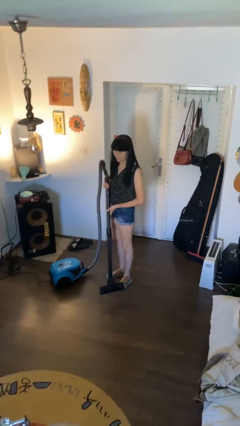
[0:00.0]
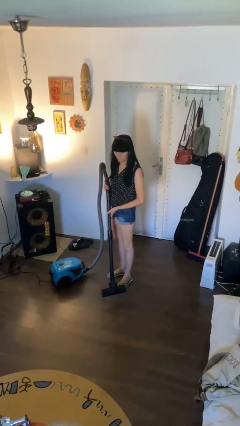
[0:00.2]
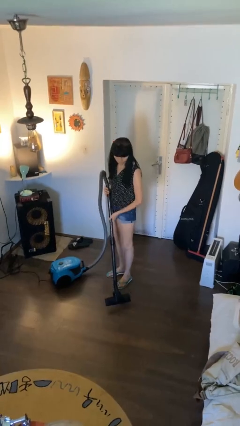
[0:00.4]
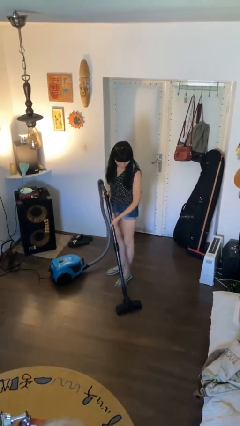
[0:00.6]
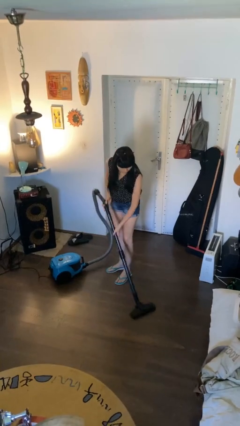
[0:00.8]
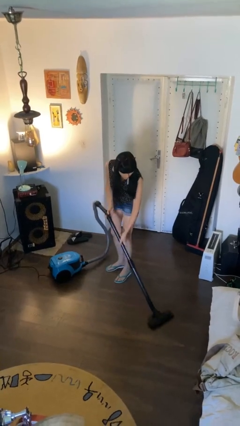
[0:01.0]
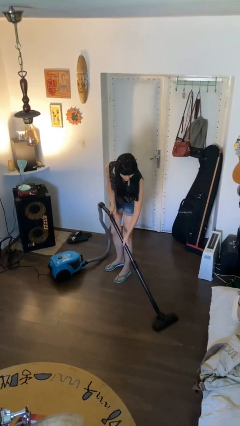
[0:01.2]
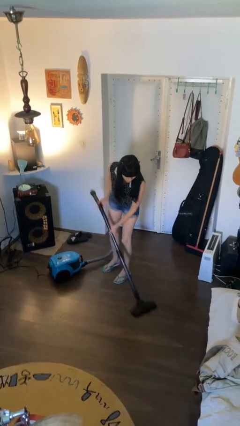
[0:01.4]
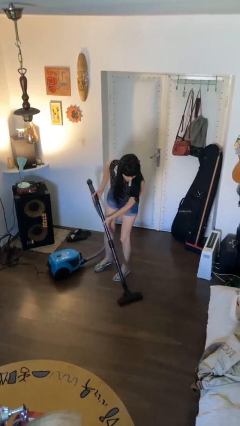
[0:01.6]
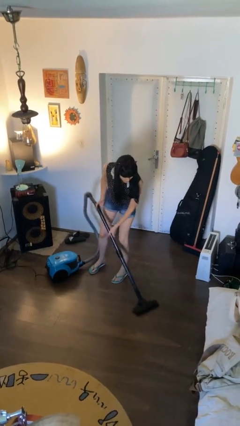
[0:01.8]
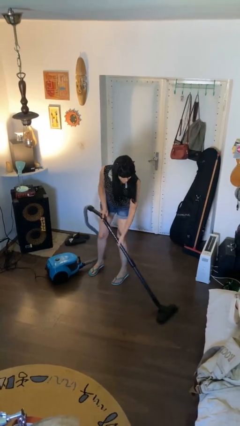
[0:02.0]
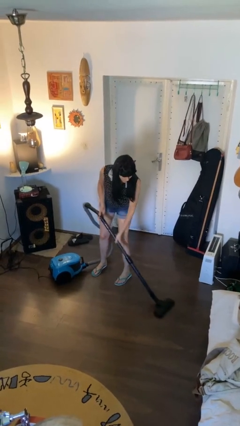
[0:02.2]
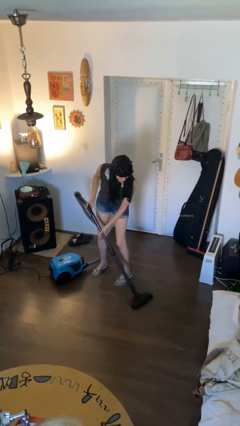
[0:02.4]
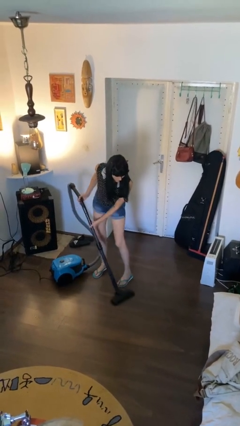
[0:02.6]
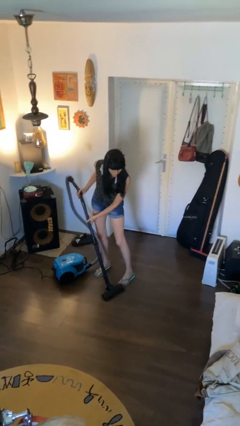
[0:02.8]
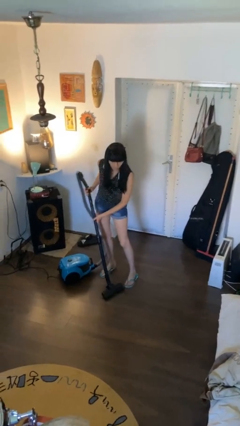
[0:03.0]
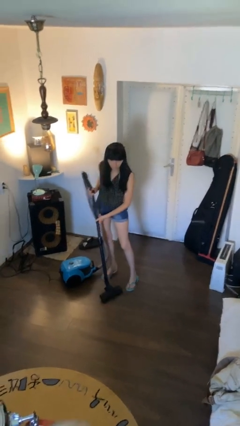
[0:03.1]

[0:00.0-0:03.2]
person vacuums carpet

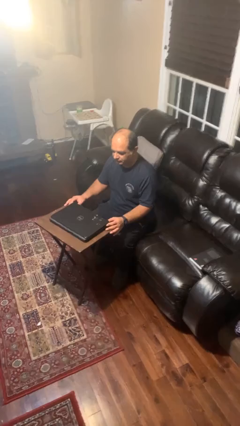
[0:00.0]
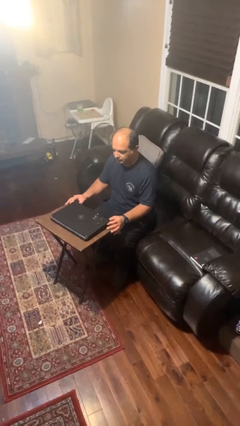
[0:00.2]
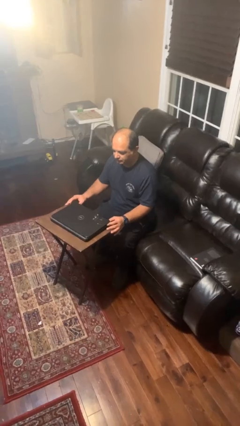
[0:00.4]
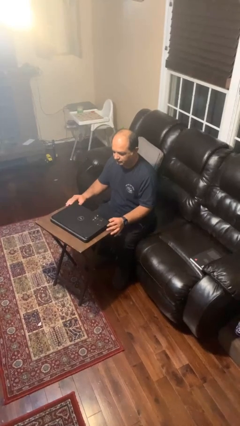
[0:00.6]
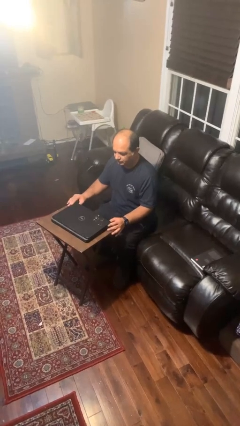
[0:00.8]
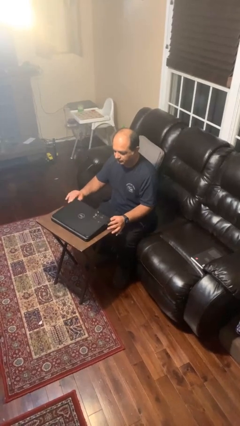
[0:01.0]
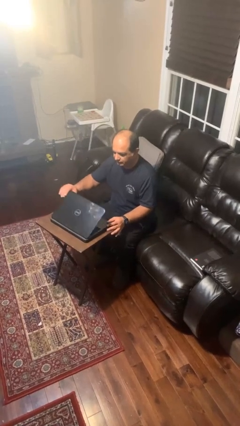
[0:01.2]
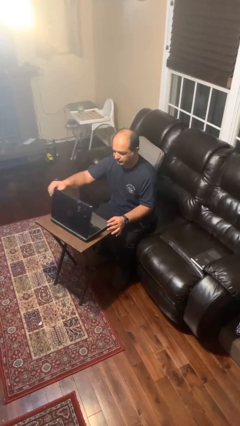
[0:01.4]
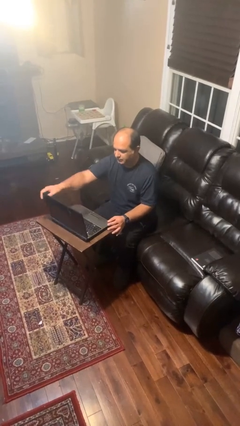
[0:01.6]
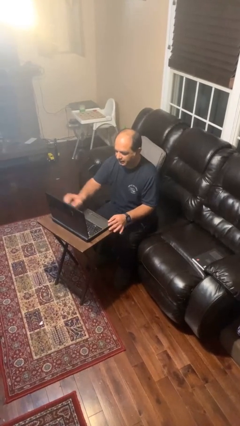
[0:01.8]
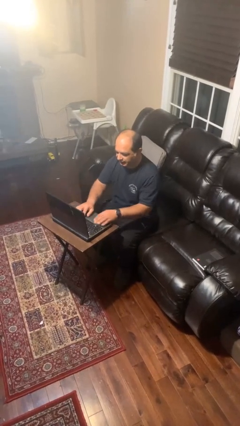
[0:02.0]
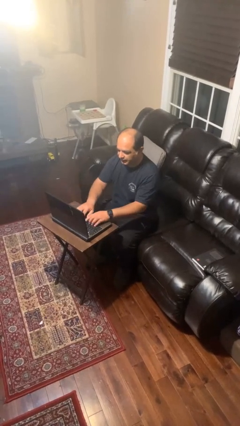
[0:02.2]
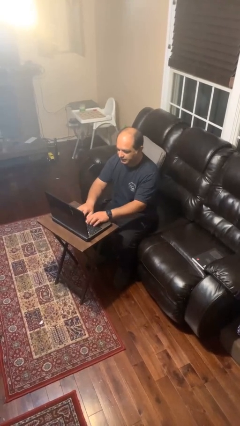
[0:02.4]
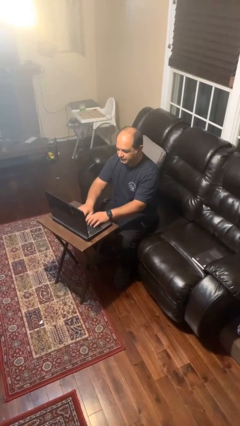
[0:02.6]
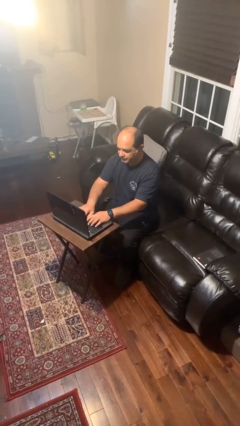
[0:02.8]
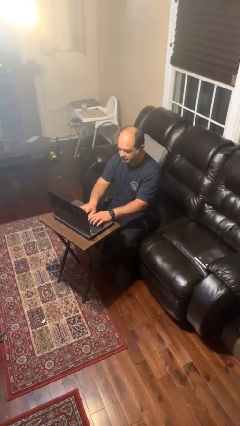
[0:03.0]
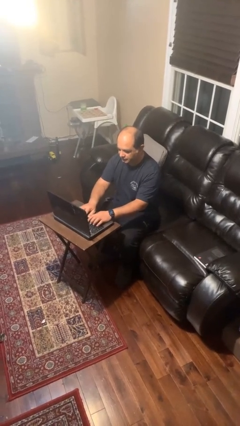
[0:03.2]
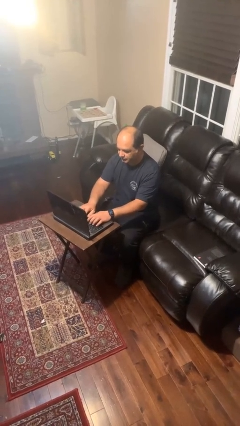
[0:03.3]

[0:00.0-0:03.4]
person interacts with laptop

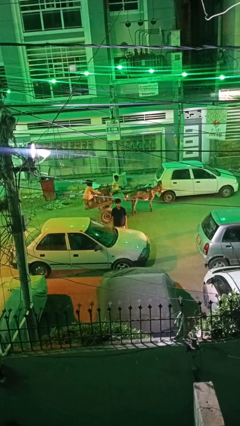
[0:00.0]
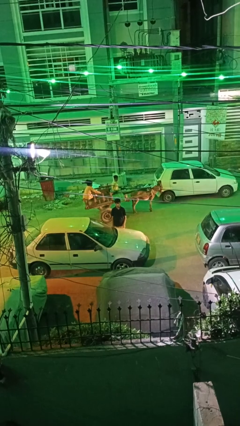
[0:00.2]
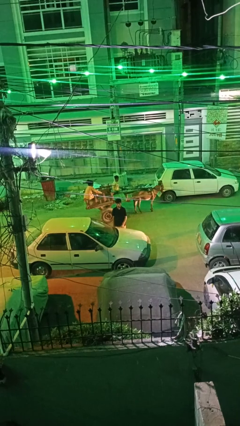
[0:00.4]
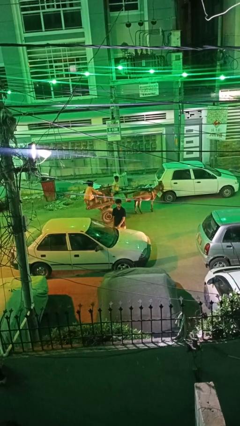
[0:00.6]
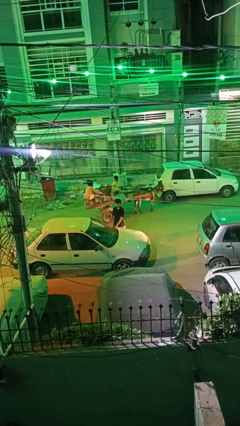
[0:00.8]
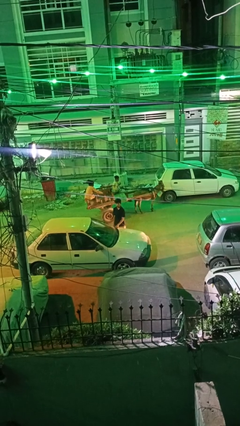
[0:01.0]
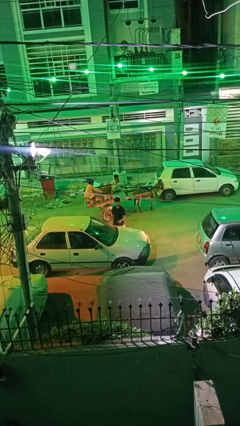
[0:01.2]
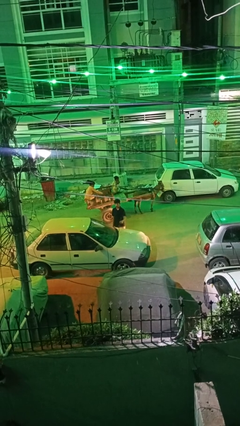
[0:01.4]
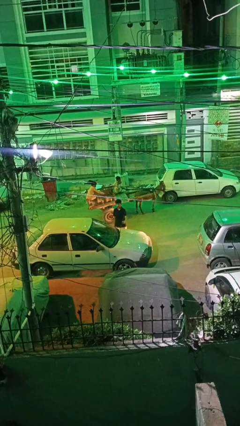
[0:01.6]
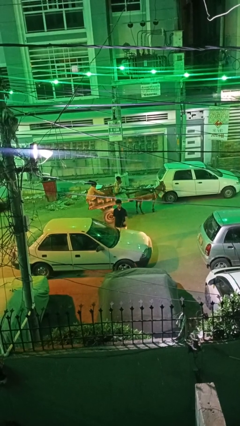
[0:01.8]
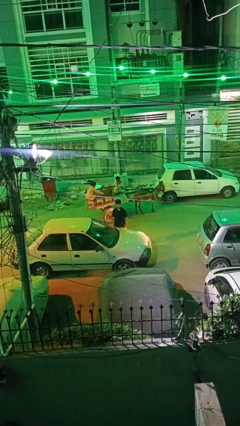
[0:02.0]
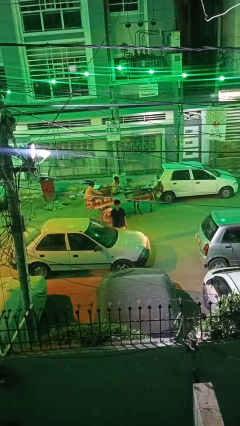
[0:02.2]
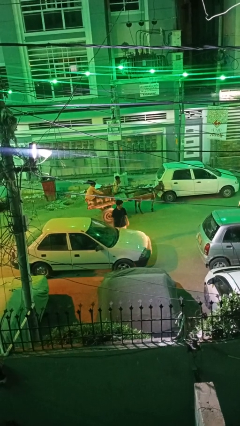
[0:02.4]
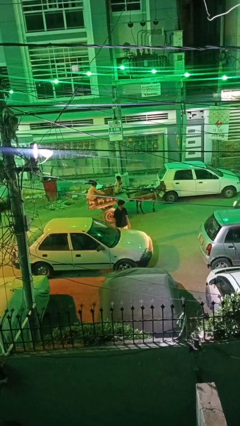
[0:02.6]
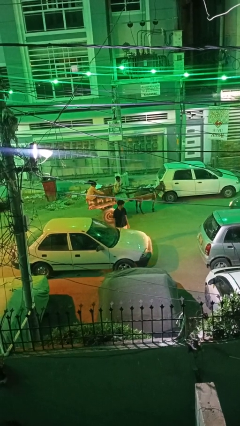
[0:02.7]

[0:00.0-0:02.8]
person flips up car wipers

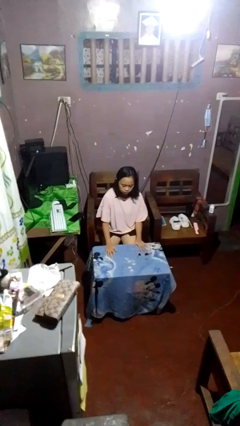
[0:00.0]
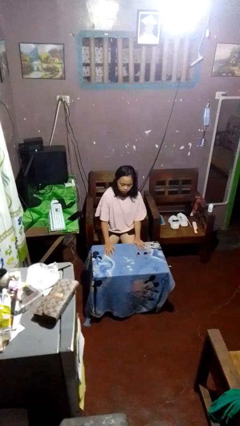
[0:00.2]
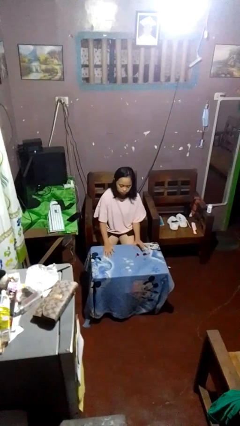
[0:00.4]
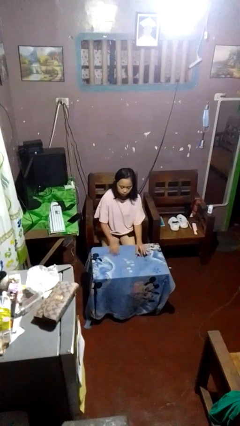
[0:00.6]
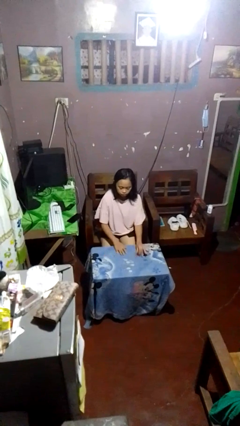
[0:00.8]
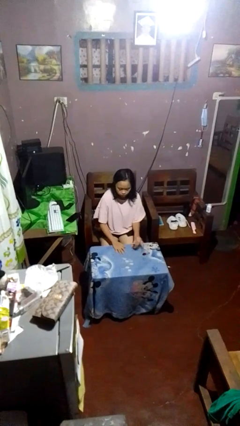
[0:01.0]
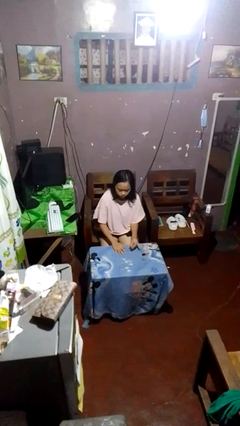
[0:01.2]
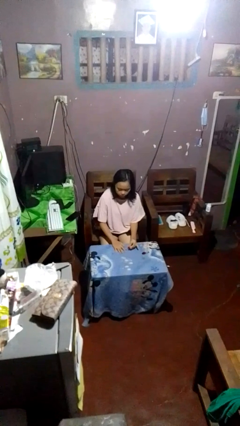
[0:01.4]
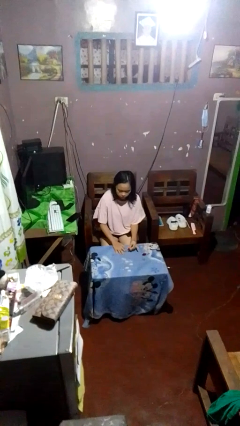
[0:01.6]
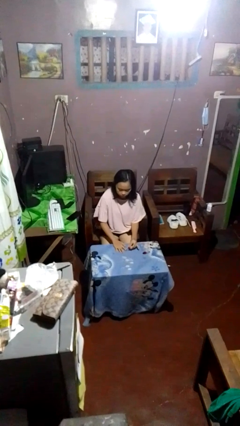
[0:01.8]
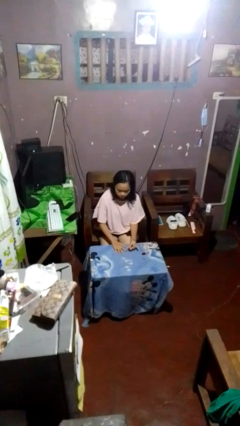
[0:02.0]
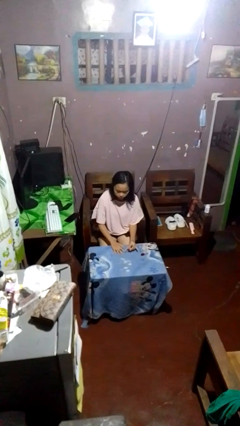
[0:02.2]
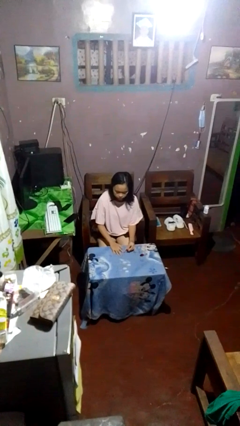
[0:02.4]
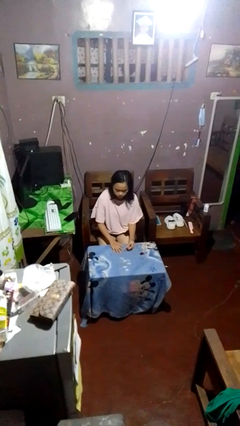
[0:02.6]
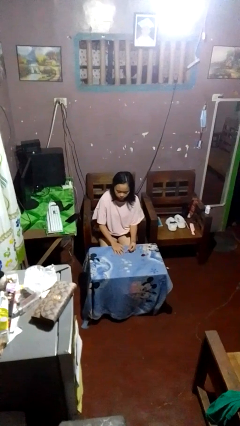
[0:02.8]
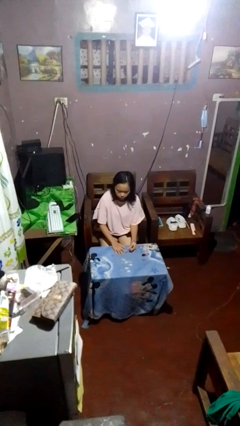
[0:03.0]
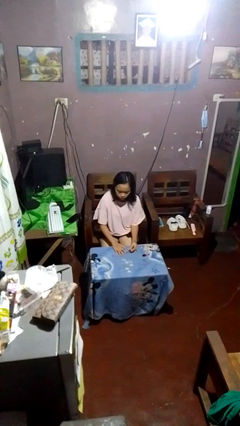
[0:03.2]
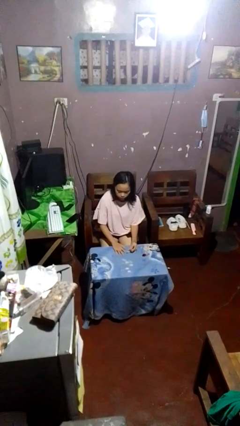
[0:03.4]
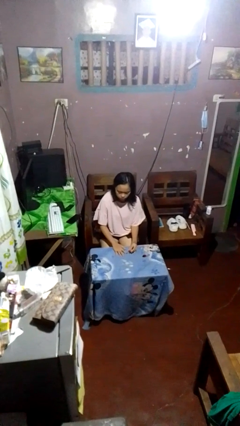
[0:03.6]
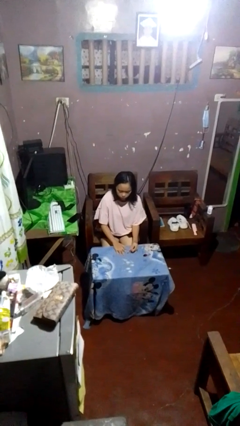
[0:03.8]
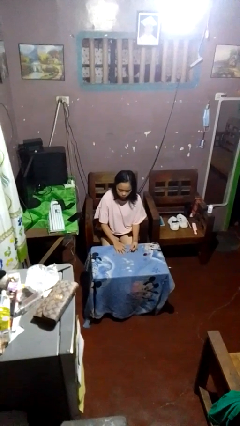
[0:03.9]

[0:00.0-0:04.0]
person paints fingernails

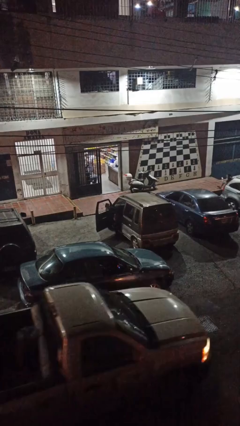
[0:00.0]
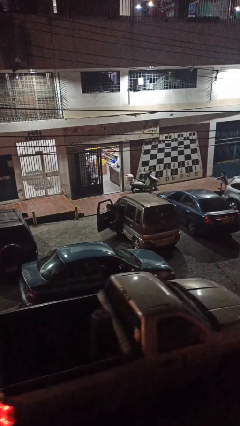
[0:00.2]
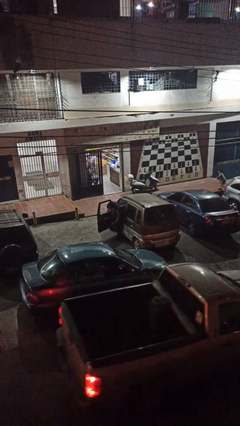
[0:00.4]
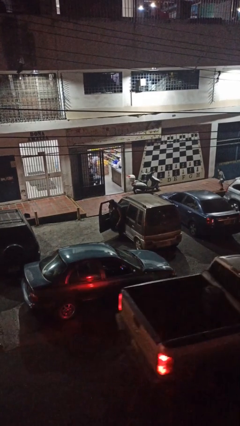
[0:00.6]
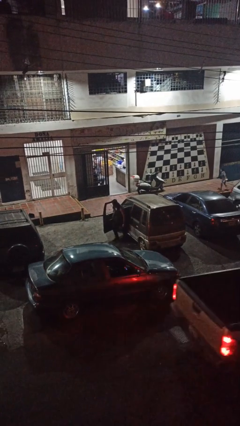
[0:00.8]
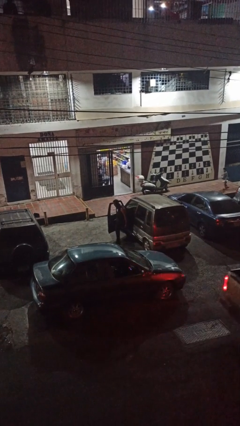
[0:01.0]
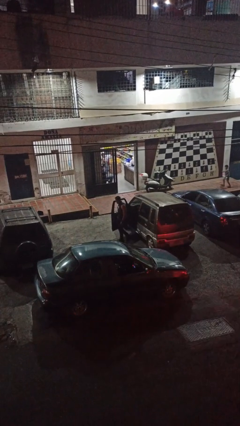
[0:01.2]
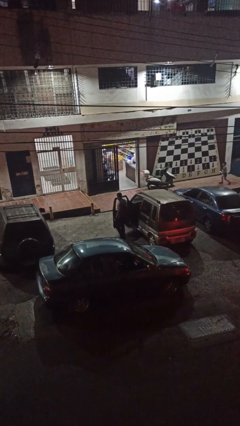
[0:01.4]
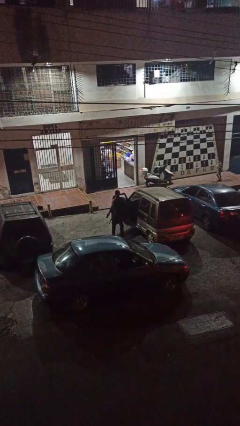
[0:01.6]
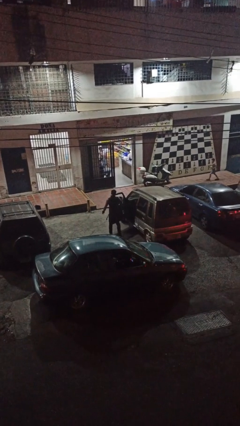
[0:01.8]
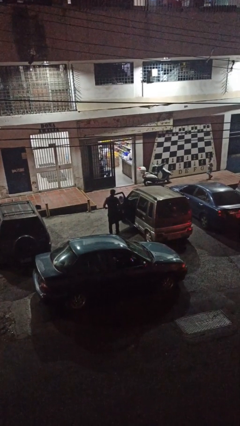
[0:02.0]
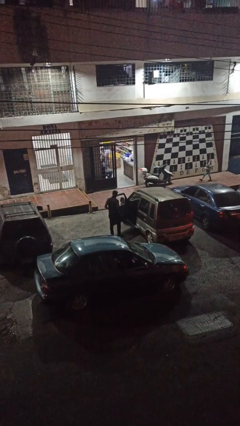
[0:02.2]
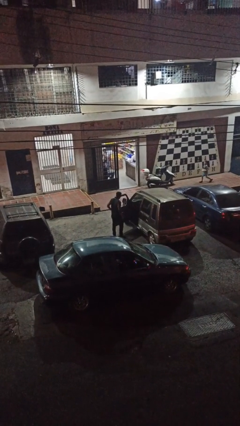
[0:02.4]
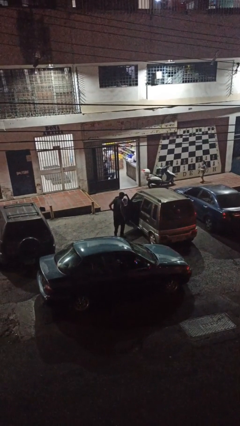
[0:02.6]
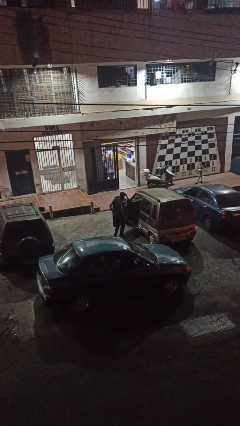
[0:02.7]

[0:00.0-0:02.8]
person exits car

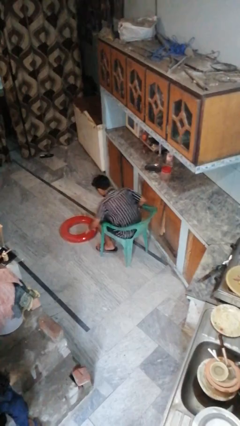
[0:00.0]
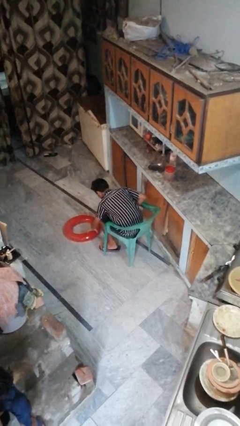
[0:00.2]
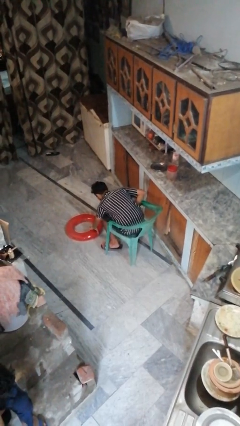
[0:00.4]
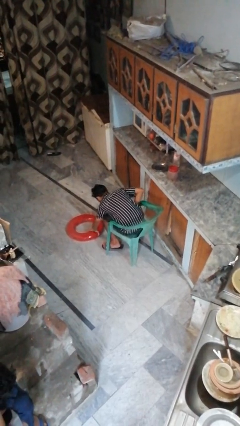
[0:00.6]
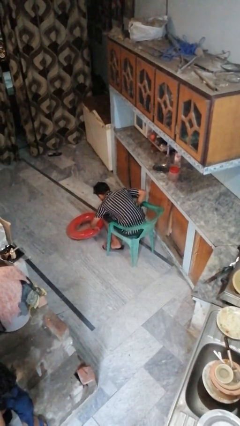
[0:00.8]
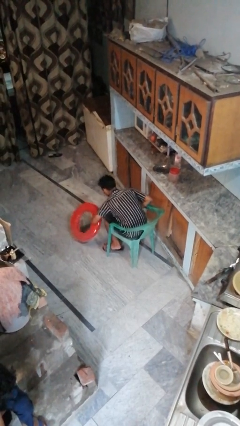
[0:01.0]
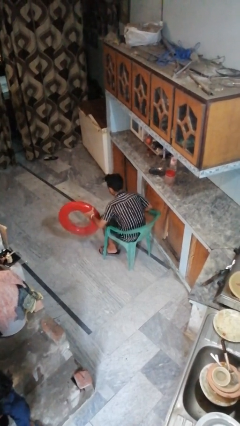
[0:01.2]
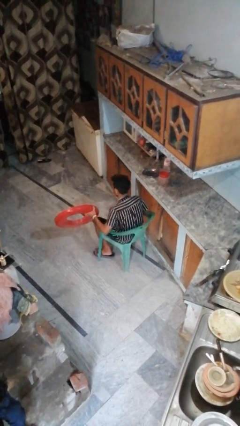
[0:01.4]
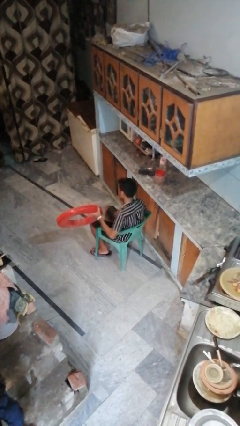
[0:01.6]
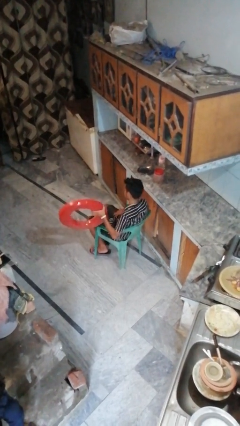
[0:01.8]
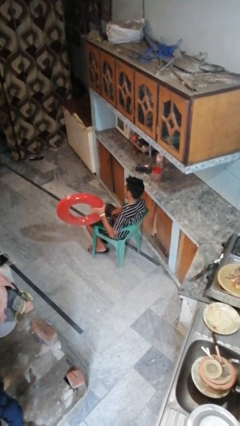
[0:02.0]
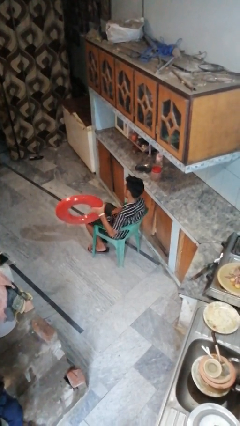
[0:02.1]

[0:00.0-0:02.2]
person picks up object from floor
